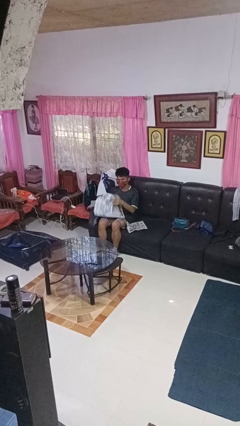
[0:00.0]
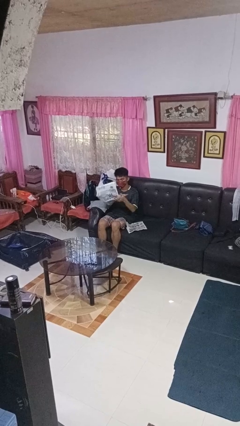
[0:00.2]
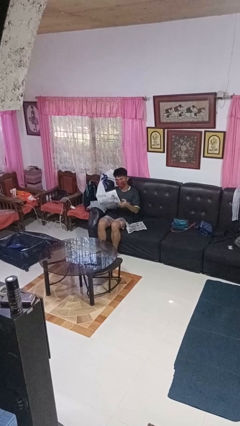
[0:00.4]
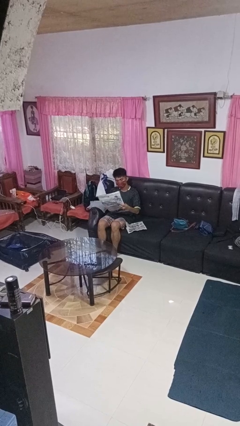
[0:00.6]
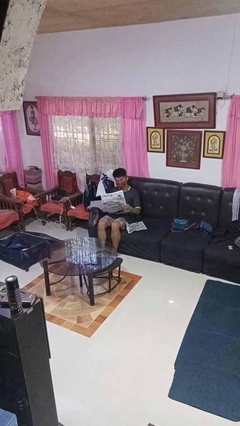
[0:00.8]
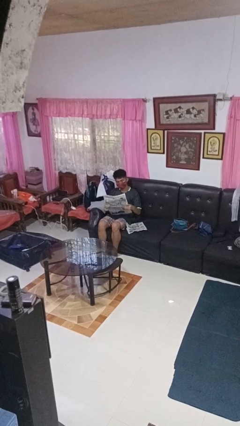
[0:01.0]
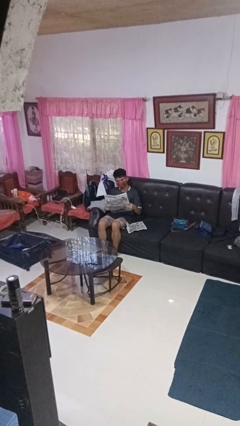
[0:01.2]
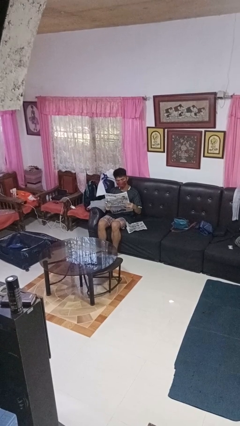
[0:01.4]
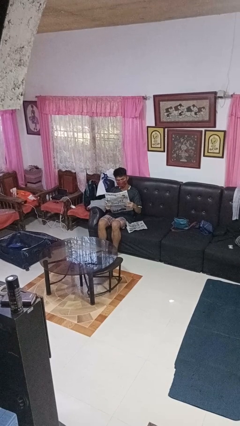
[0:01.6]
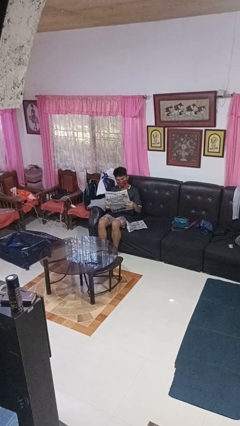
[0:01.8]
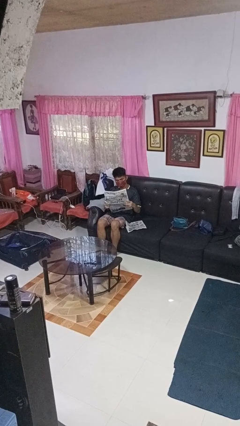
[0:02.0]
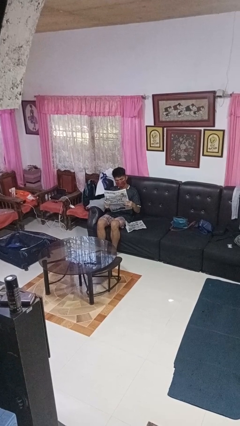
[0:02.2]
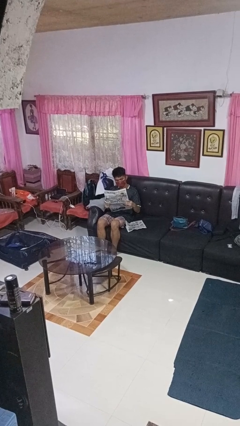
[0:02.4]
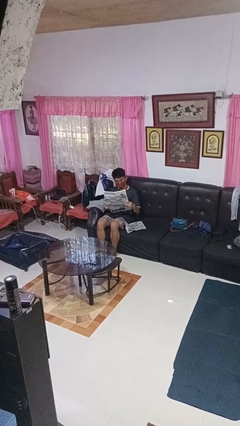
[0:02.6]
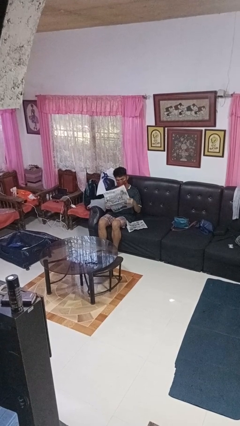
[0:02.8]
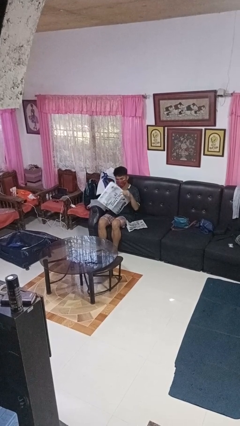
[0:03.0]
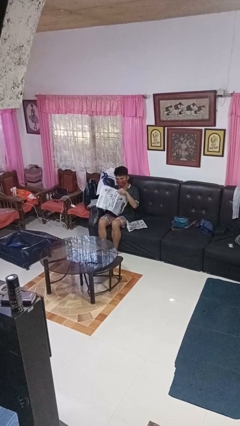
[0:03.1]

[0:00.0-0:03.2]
person reads newspaper

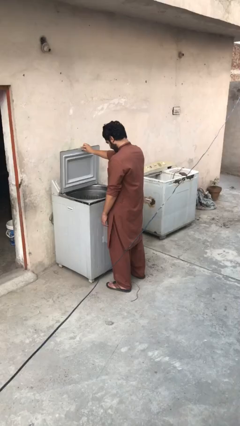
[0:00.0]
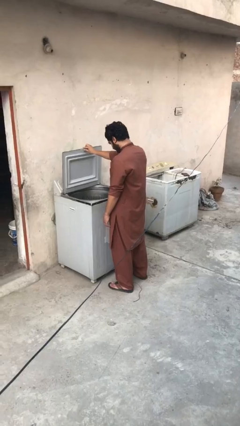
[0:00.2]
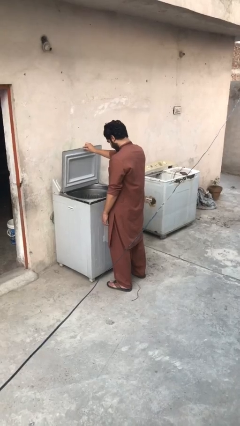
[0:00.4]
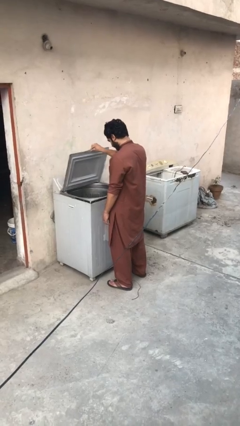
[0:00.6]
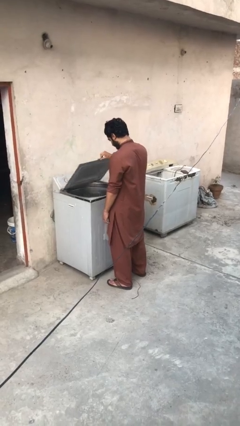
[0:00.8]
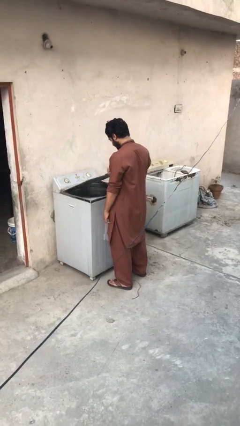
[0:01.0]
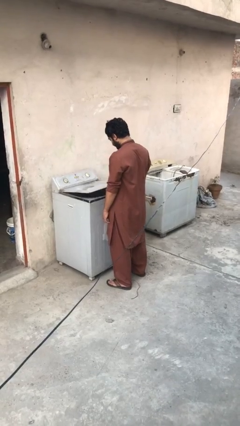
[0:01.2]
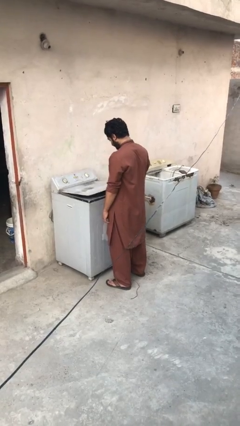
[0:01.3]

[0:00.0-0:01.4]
person closes clothes washer

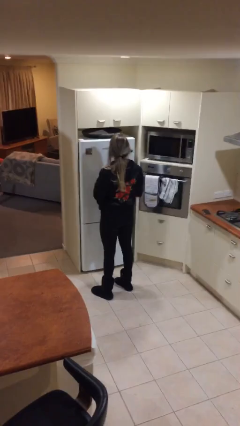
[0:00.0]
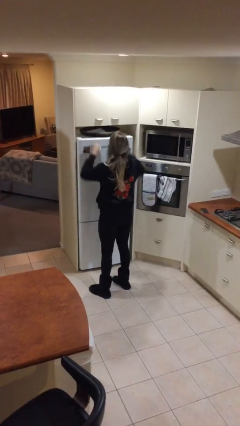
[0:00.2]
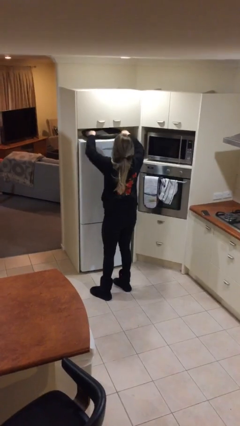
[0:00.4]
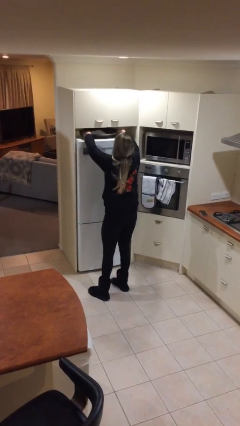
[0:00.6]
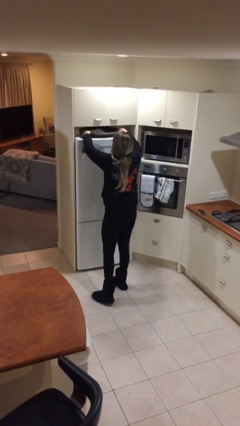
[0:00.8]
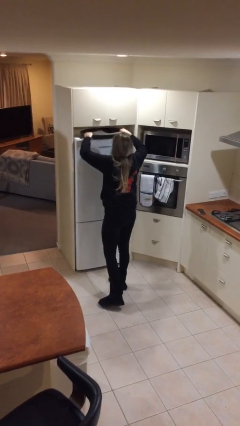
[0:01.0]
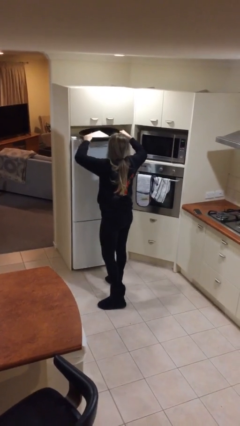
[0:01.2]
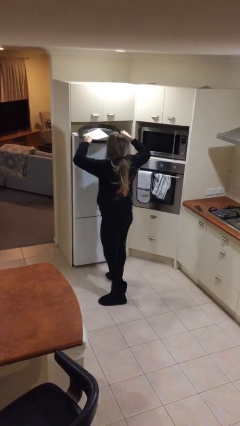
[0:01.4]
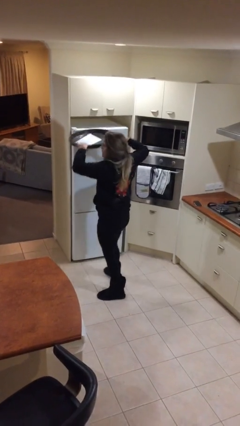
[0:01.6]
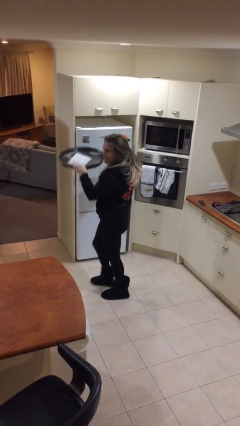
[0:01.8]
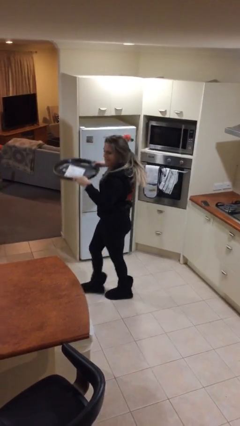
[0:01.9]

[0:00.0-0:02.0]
person picks up object from shelf

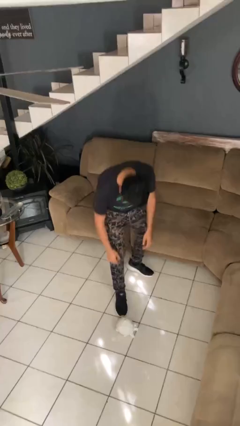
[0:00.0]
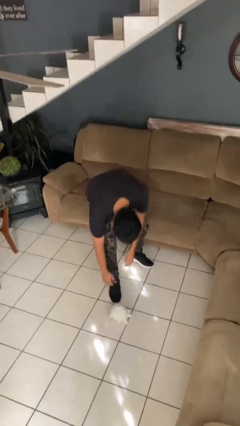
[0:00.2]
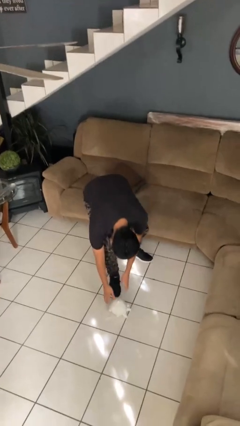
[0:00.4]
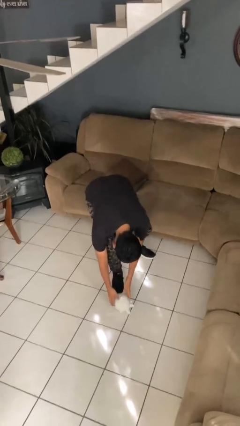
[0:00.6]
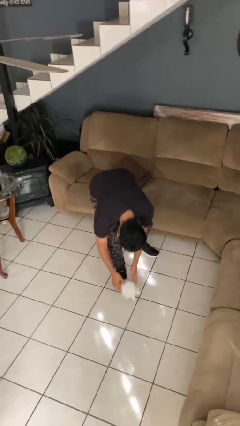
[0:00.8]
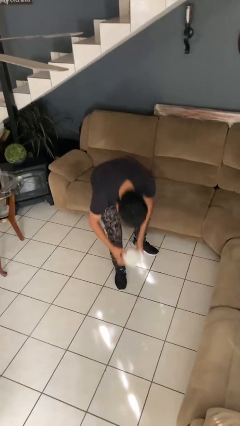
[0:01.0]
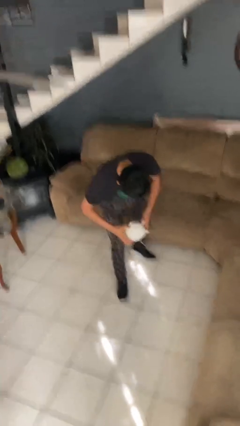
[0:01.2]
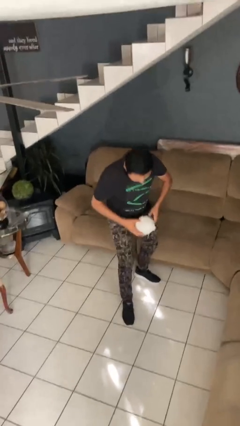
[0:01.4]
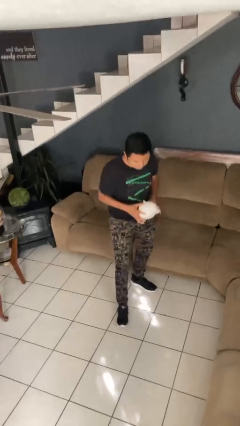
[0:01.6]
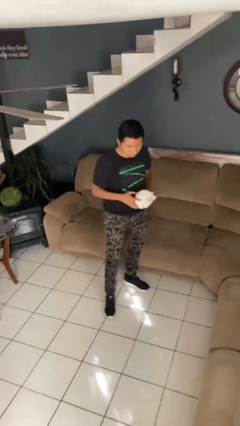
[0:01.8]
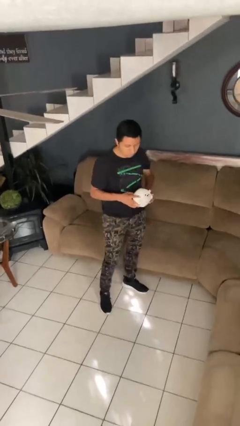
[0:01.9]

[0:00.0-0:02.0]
person picks up object from floor

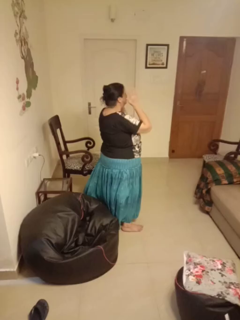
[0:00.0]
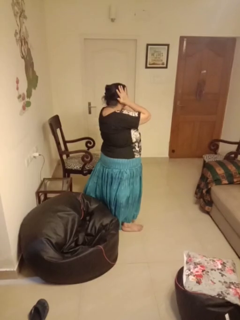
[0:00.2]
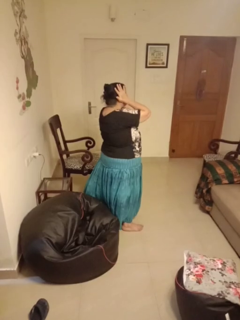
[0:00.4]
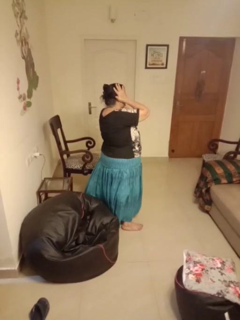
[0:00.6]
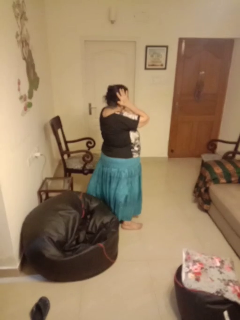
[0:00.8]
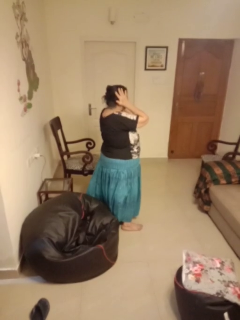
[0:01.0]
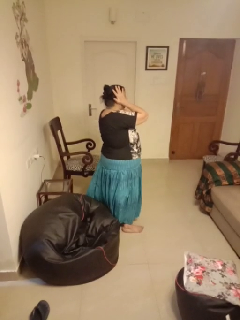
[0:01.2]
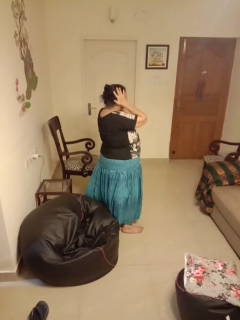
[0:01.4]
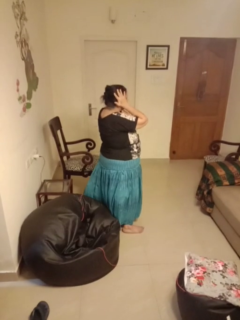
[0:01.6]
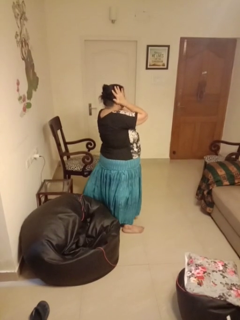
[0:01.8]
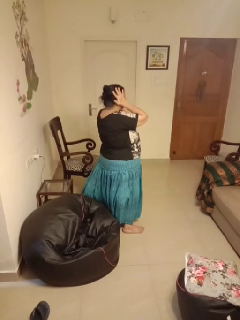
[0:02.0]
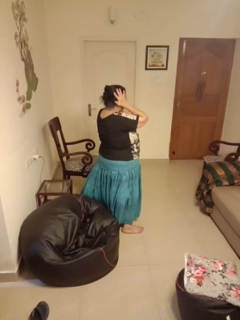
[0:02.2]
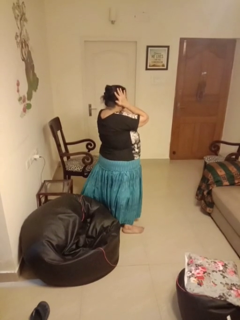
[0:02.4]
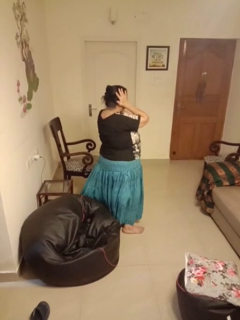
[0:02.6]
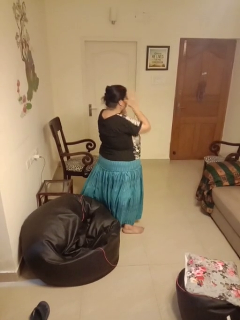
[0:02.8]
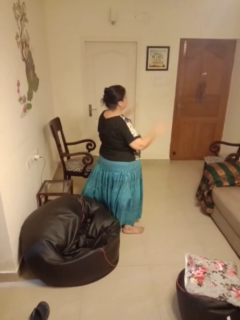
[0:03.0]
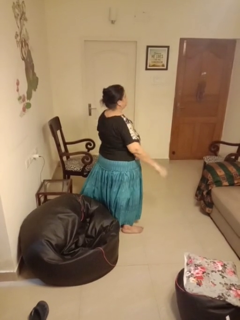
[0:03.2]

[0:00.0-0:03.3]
person puts fingers in ear

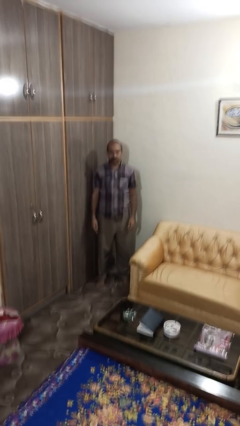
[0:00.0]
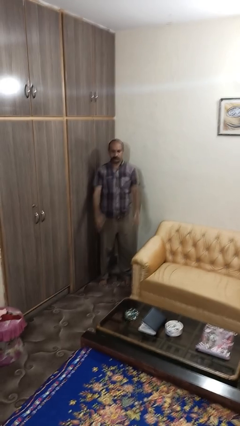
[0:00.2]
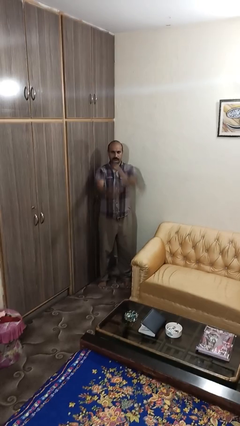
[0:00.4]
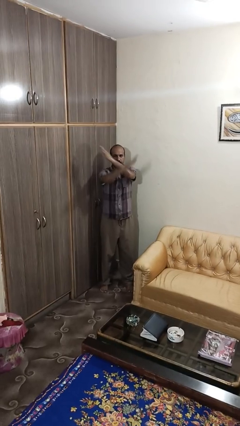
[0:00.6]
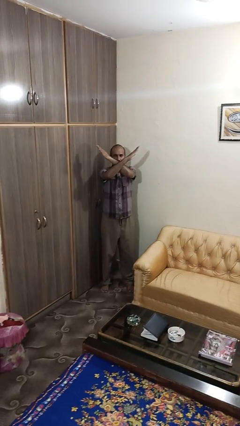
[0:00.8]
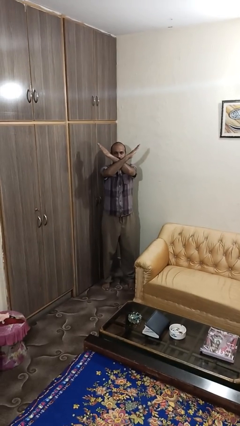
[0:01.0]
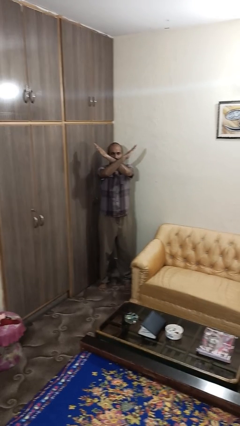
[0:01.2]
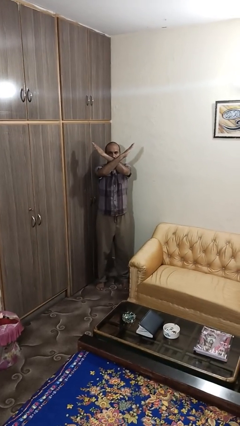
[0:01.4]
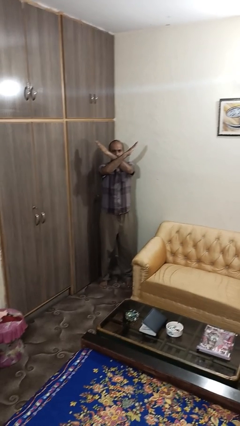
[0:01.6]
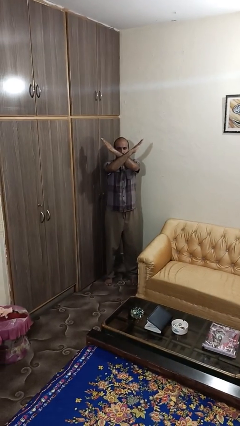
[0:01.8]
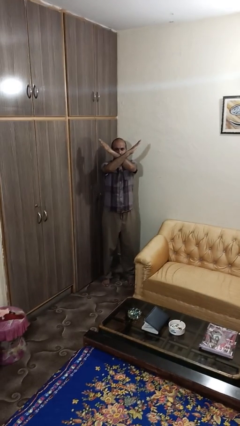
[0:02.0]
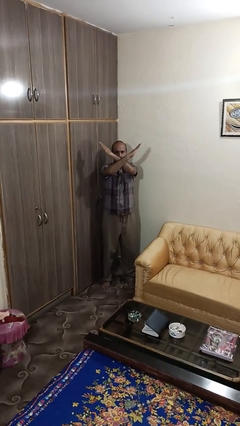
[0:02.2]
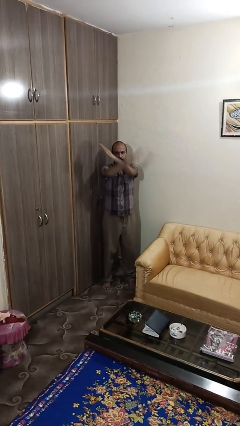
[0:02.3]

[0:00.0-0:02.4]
person gestures arms x

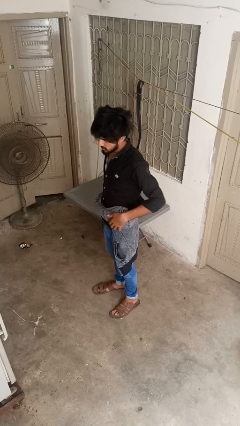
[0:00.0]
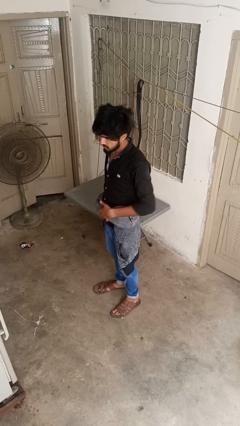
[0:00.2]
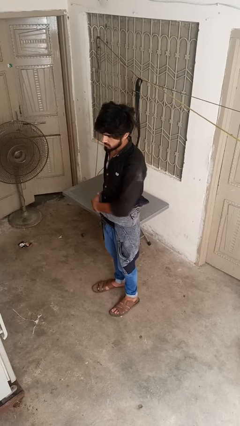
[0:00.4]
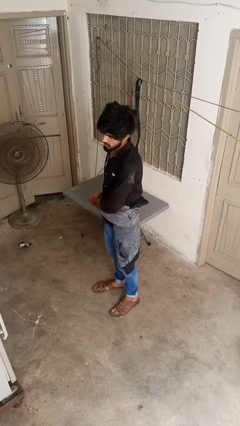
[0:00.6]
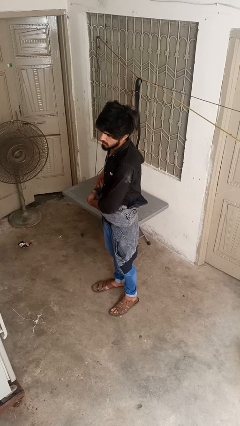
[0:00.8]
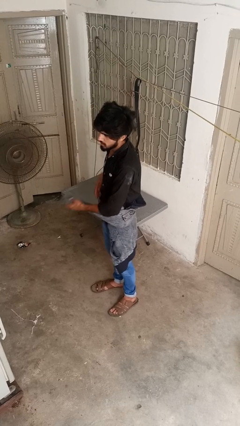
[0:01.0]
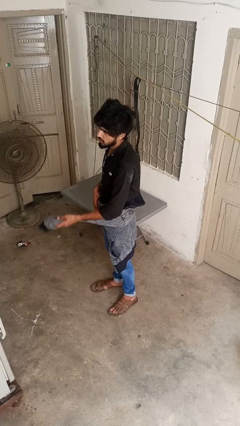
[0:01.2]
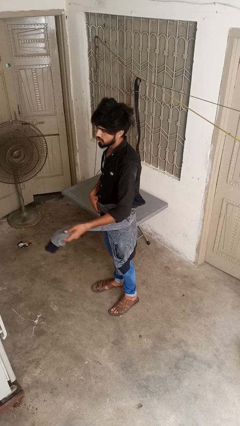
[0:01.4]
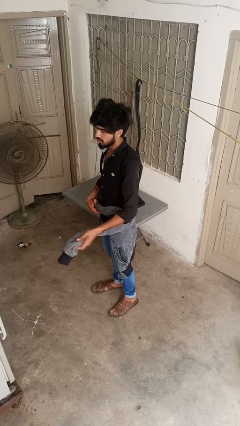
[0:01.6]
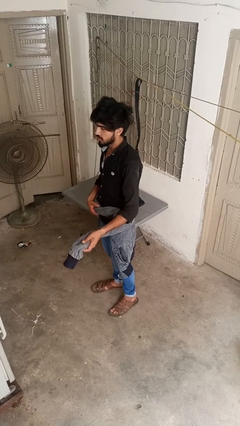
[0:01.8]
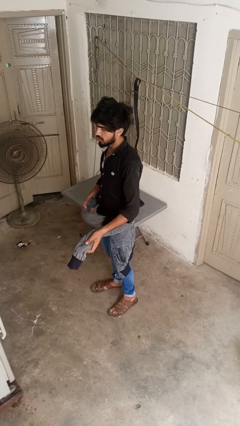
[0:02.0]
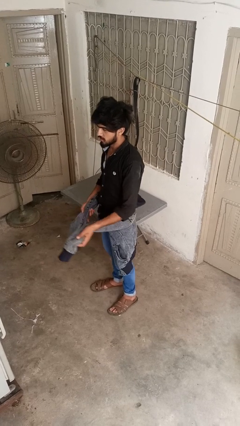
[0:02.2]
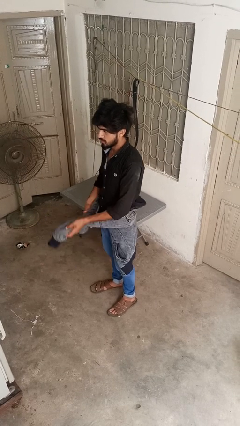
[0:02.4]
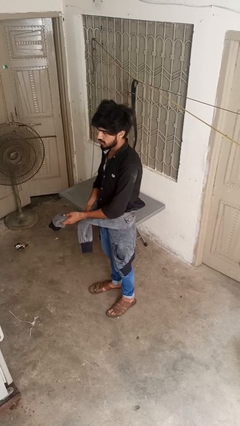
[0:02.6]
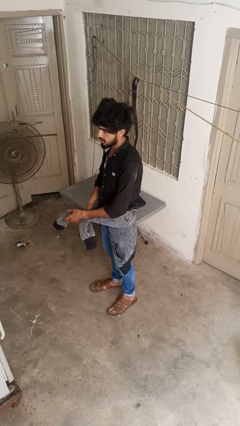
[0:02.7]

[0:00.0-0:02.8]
person unties jacket around waist

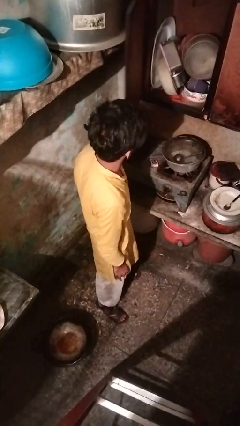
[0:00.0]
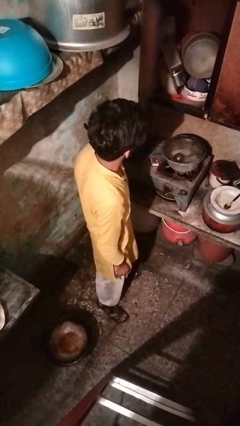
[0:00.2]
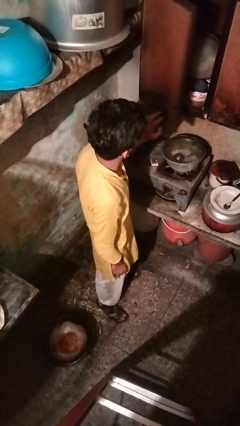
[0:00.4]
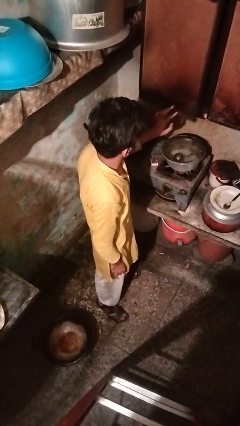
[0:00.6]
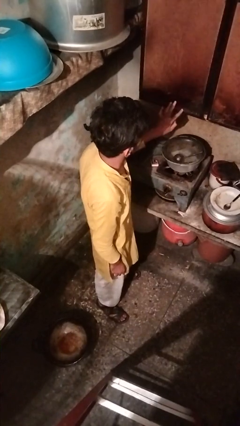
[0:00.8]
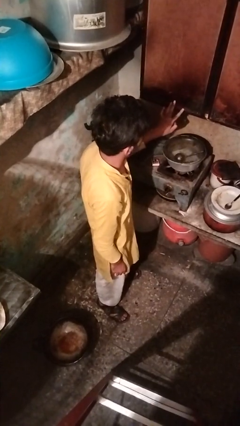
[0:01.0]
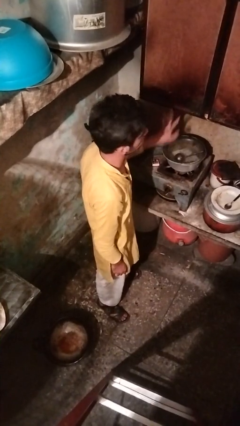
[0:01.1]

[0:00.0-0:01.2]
person closes cabinet
